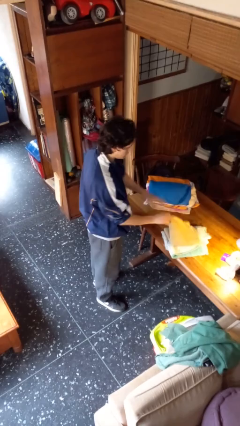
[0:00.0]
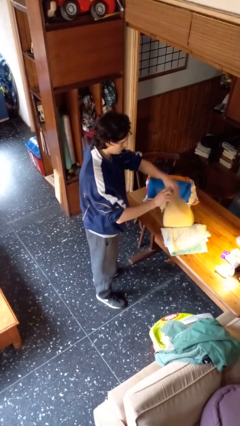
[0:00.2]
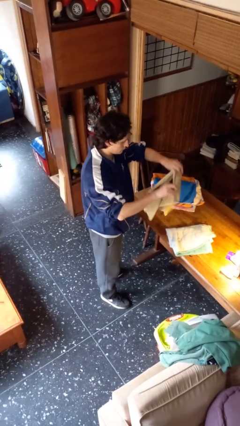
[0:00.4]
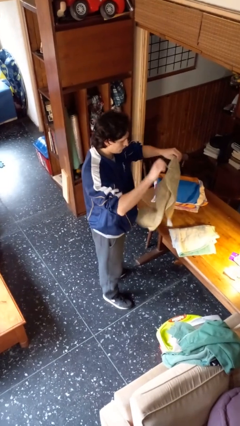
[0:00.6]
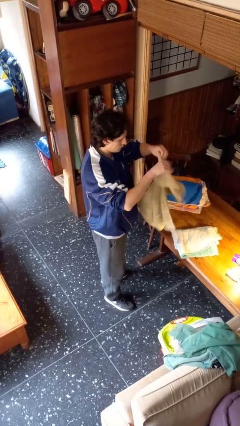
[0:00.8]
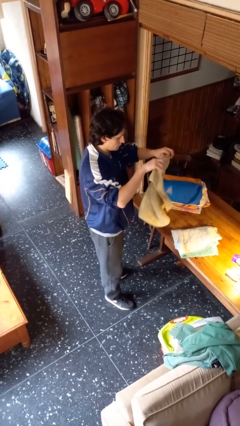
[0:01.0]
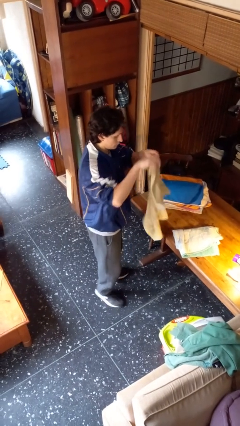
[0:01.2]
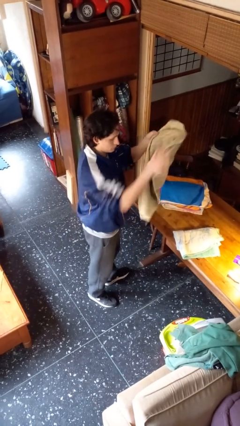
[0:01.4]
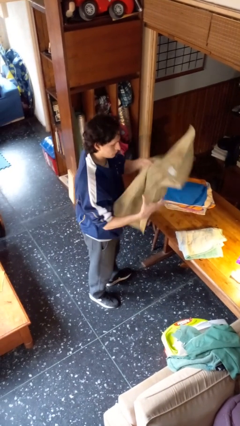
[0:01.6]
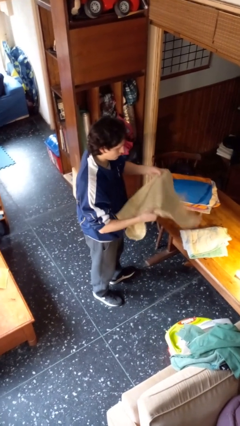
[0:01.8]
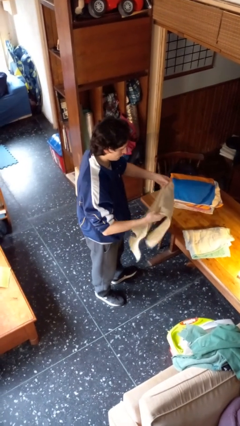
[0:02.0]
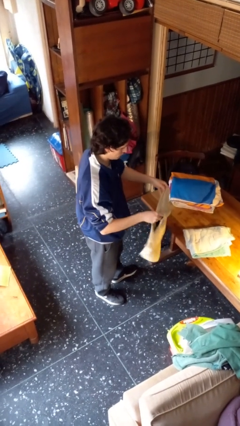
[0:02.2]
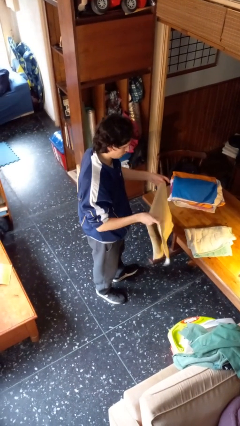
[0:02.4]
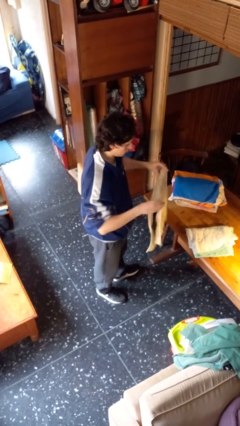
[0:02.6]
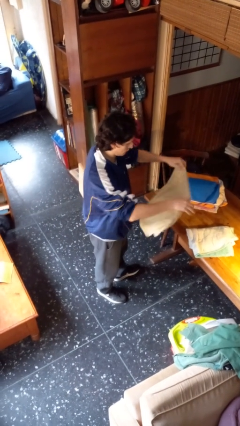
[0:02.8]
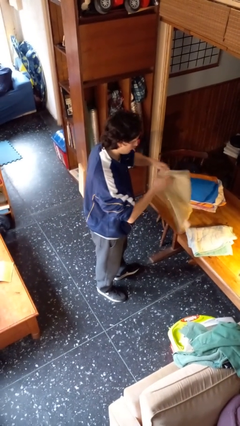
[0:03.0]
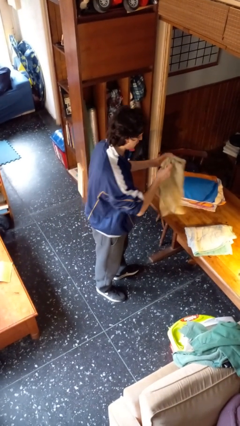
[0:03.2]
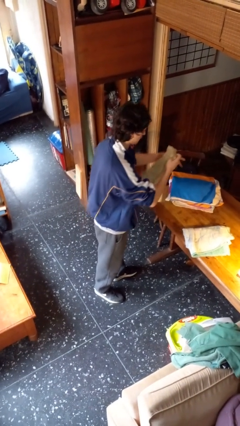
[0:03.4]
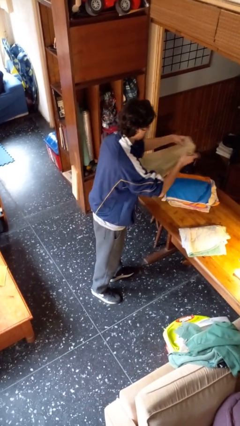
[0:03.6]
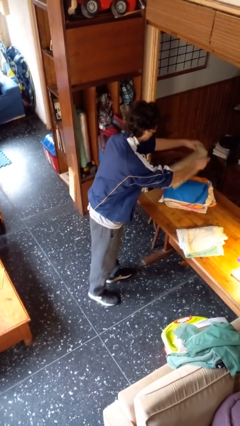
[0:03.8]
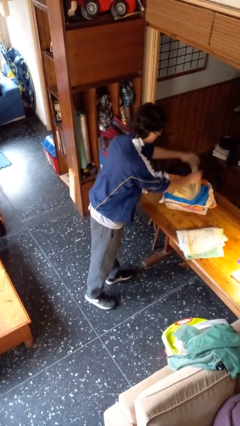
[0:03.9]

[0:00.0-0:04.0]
person folds towel

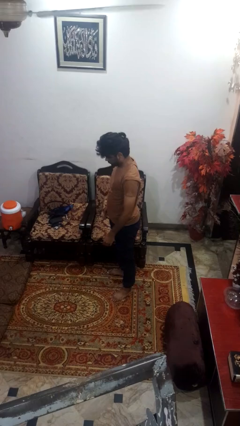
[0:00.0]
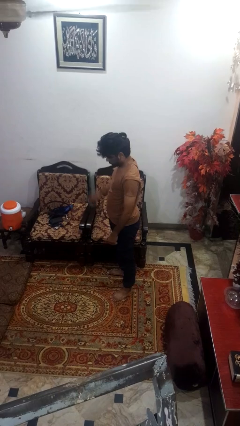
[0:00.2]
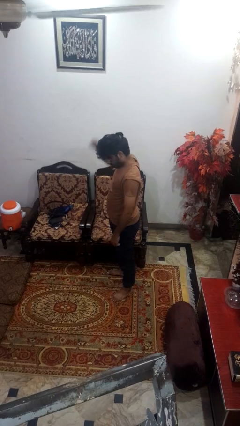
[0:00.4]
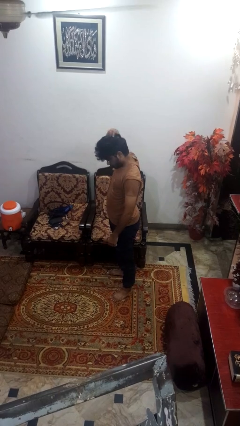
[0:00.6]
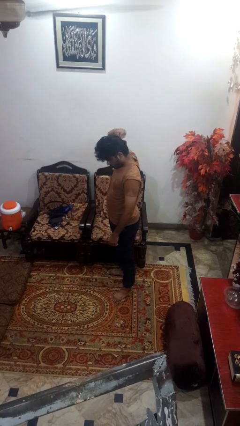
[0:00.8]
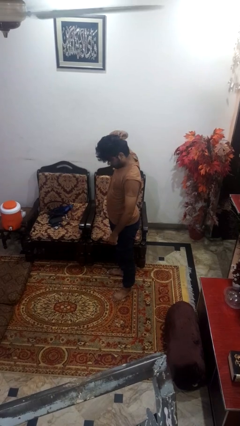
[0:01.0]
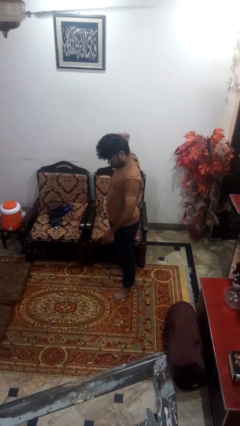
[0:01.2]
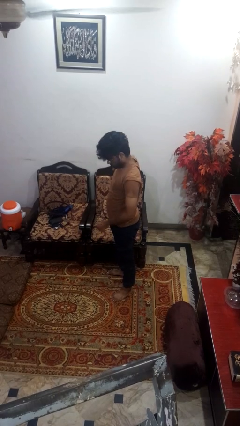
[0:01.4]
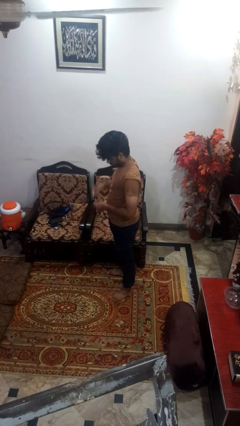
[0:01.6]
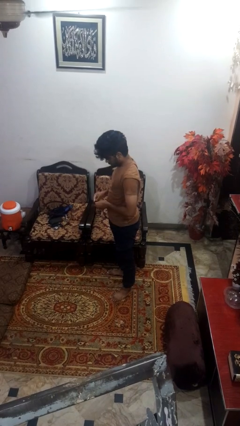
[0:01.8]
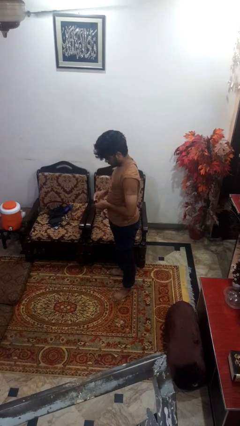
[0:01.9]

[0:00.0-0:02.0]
person takes off hairtie

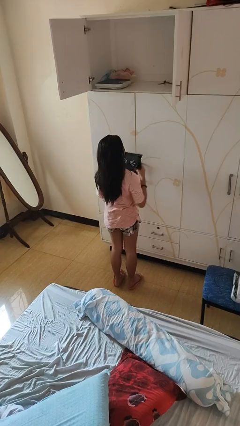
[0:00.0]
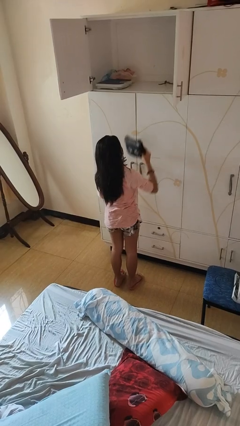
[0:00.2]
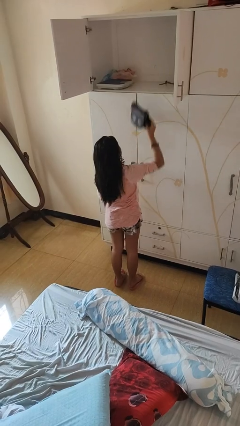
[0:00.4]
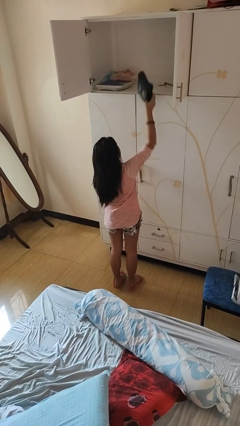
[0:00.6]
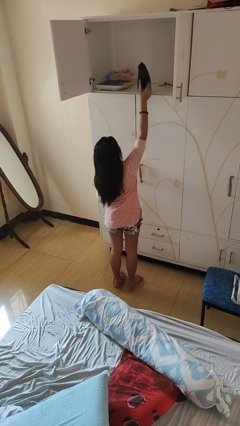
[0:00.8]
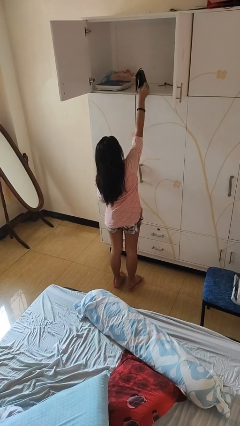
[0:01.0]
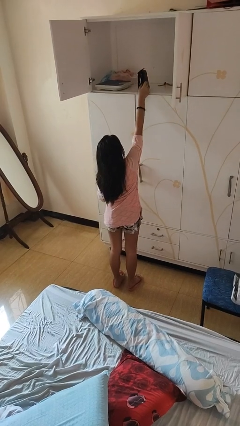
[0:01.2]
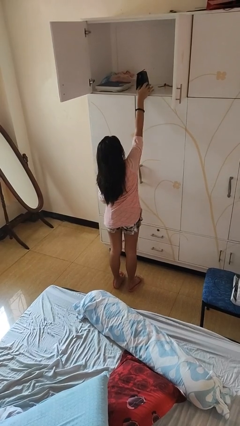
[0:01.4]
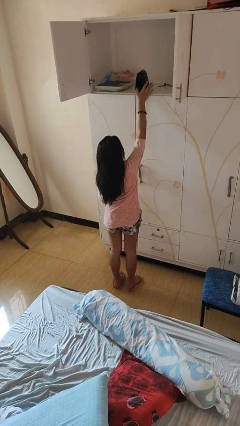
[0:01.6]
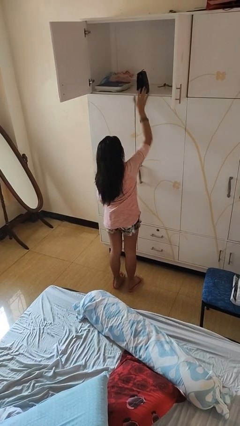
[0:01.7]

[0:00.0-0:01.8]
person puts down object on shelf

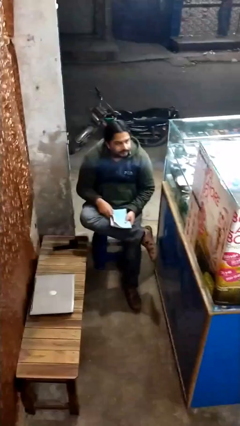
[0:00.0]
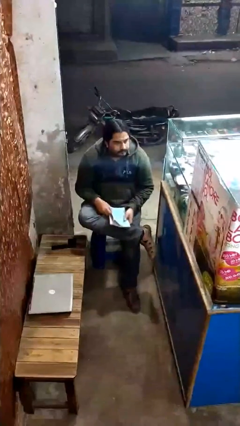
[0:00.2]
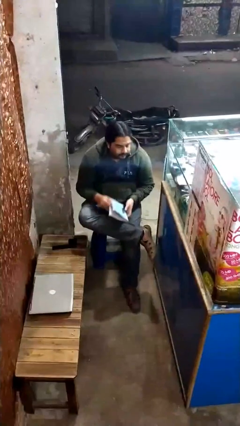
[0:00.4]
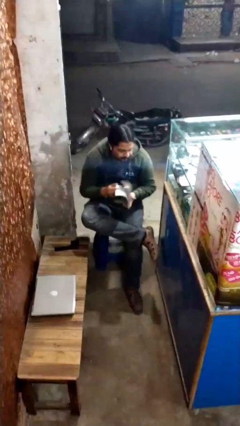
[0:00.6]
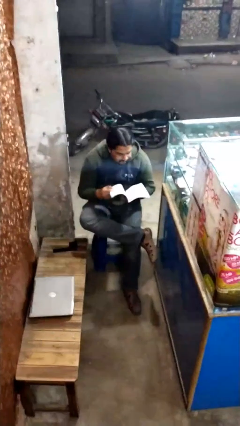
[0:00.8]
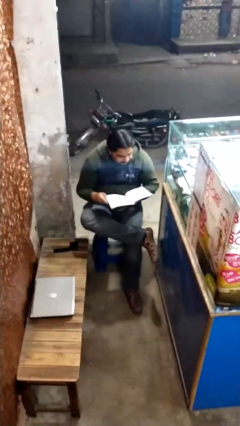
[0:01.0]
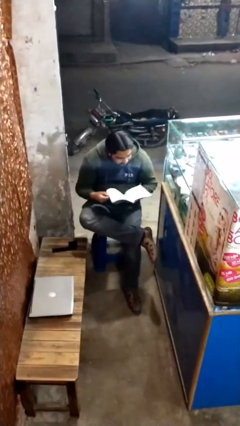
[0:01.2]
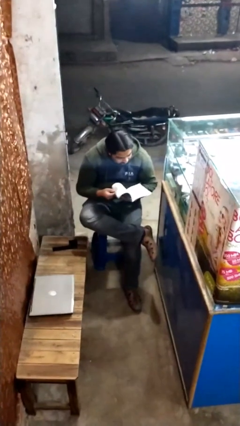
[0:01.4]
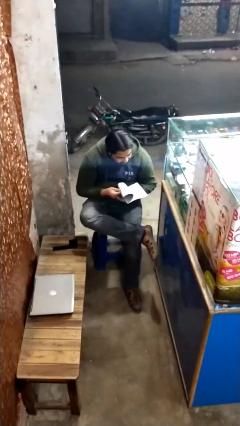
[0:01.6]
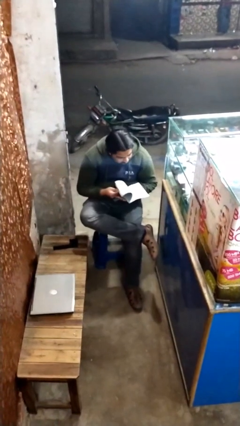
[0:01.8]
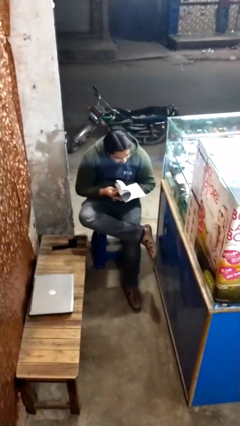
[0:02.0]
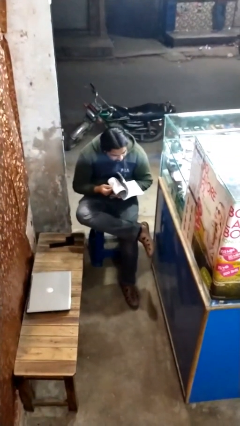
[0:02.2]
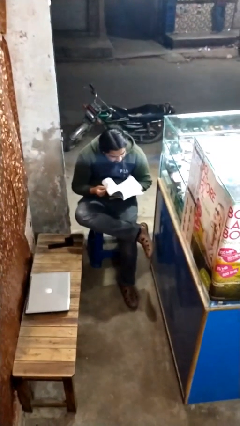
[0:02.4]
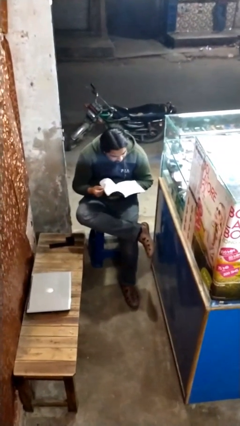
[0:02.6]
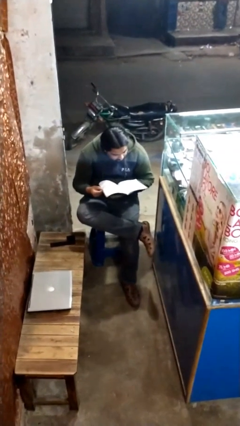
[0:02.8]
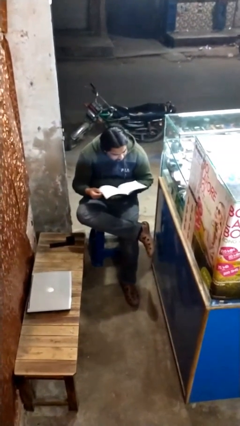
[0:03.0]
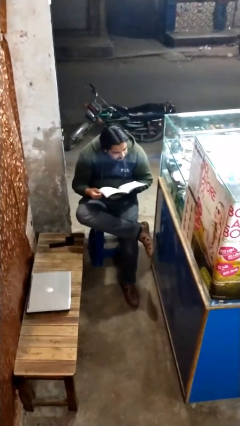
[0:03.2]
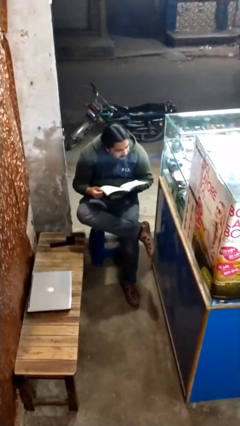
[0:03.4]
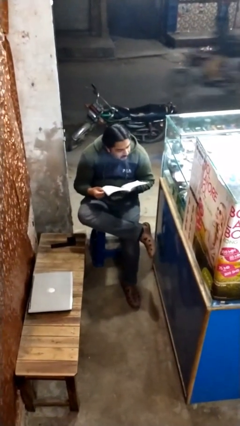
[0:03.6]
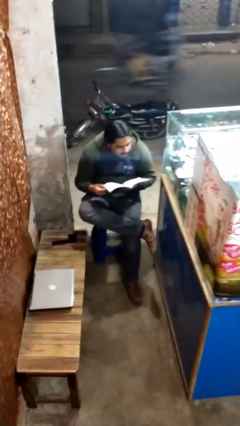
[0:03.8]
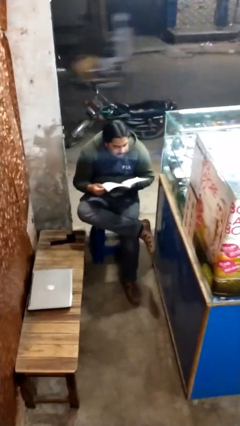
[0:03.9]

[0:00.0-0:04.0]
person reads document

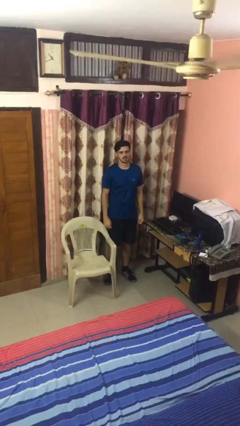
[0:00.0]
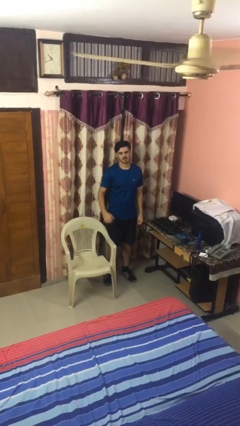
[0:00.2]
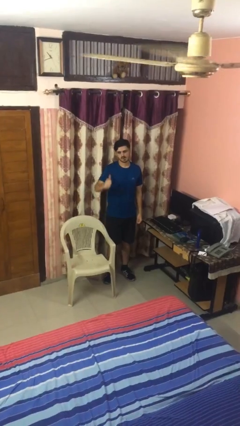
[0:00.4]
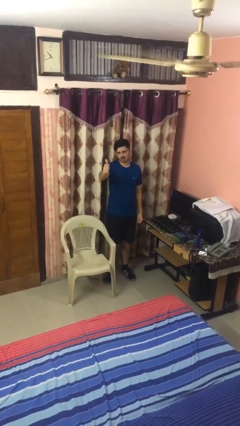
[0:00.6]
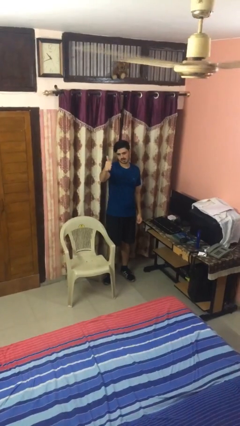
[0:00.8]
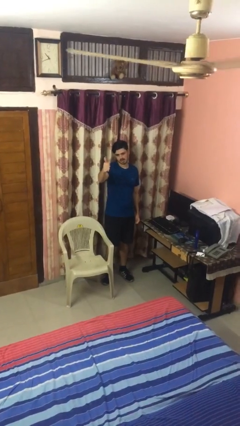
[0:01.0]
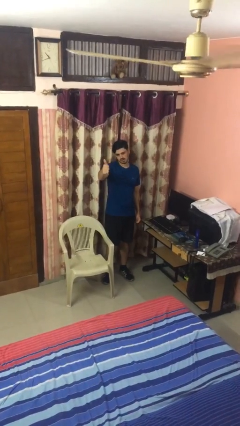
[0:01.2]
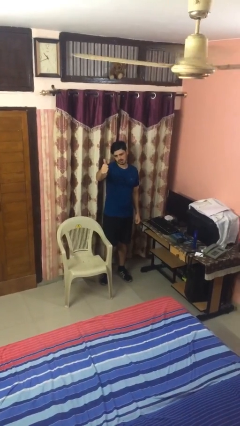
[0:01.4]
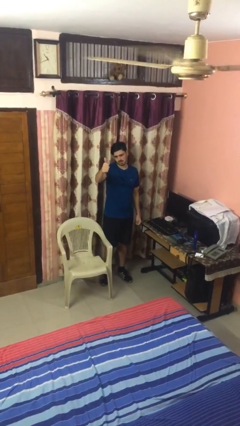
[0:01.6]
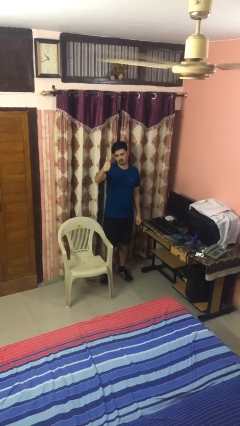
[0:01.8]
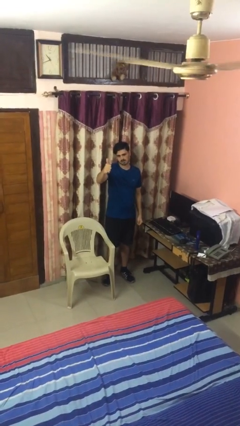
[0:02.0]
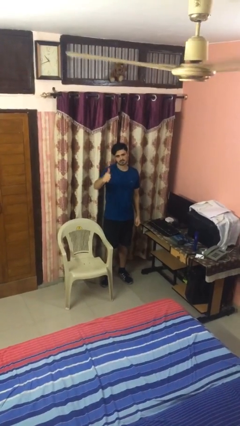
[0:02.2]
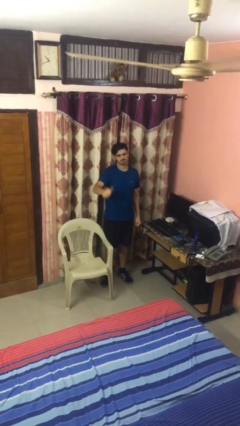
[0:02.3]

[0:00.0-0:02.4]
person gestures thumbs up

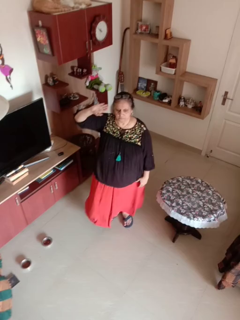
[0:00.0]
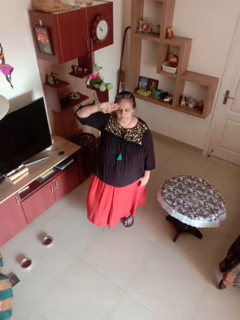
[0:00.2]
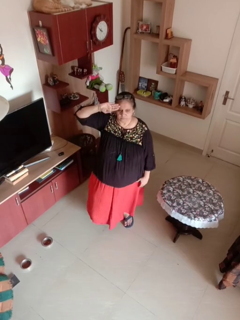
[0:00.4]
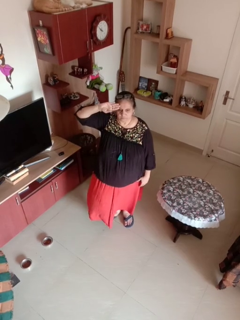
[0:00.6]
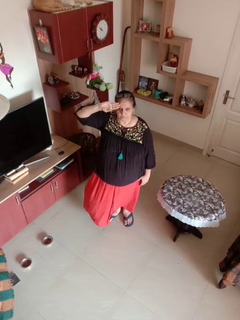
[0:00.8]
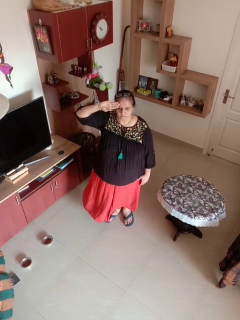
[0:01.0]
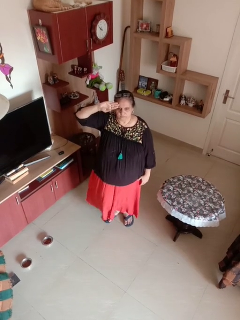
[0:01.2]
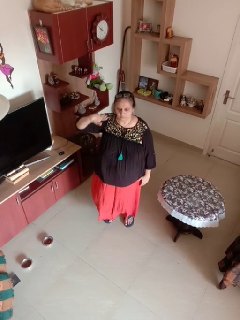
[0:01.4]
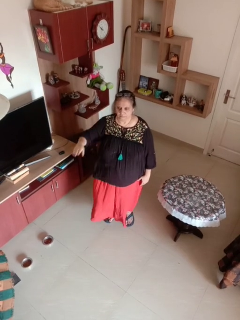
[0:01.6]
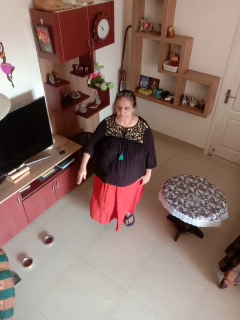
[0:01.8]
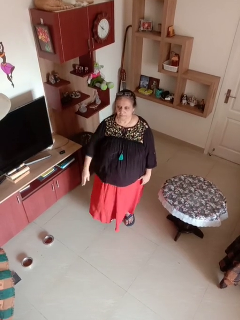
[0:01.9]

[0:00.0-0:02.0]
person salutes

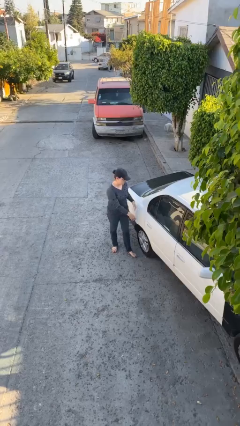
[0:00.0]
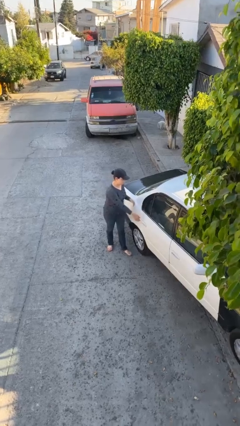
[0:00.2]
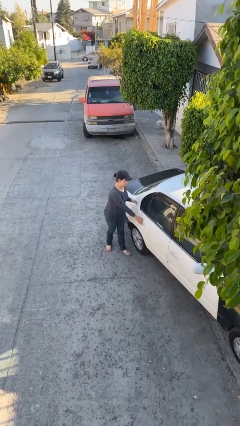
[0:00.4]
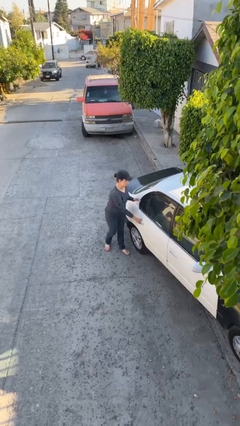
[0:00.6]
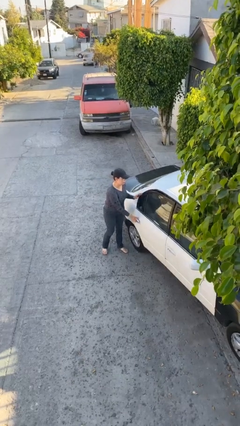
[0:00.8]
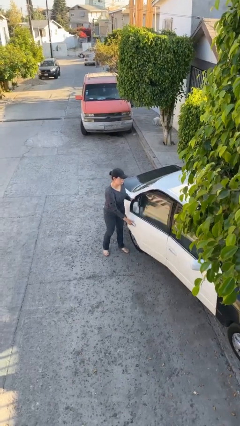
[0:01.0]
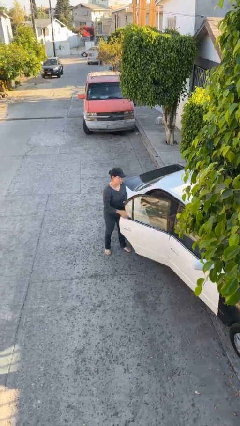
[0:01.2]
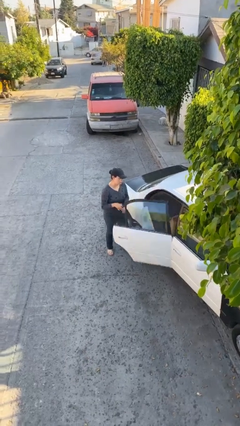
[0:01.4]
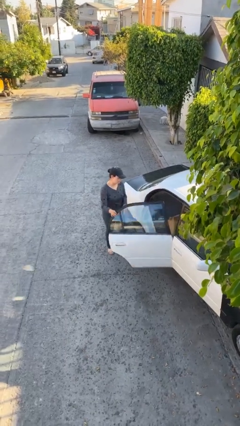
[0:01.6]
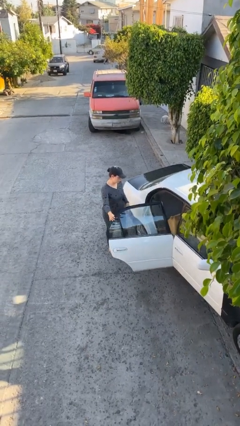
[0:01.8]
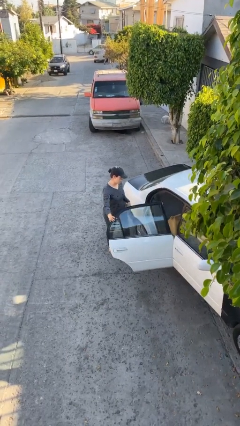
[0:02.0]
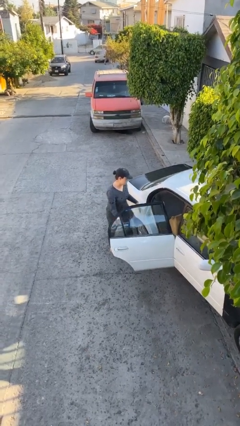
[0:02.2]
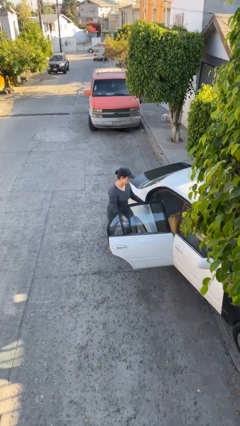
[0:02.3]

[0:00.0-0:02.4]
person opens car door
